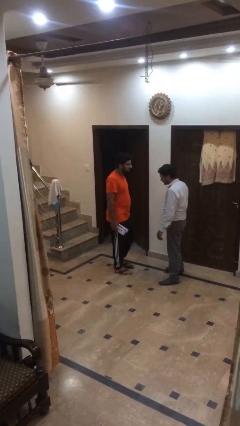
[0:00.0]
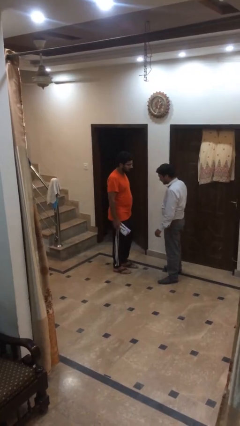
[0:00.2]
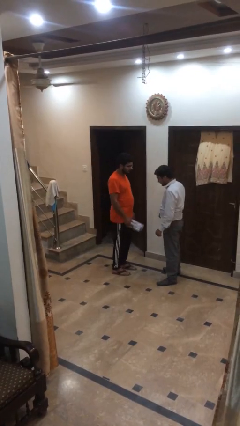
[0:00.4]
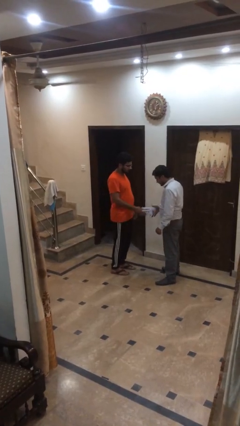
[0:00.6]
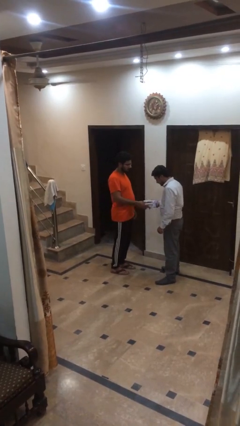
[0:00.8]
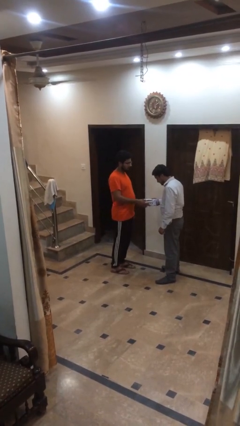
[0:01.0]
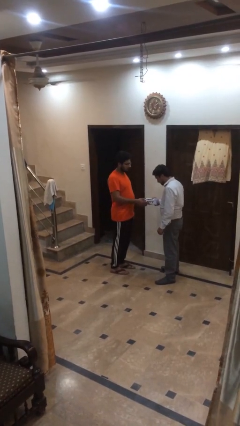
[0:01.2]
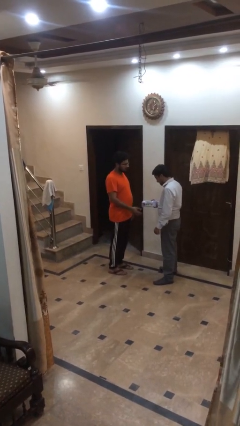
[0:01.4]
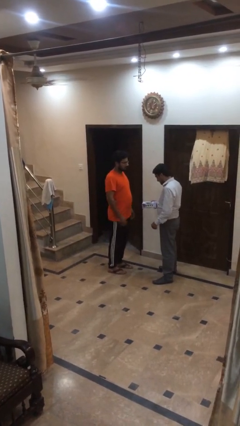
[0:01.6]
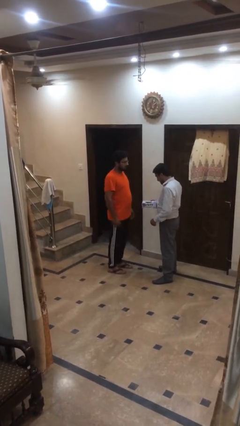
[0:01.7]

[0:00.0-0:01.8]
person transfers object to person

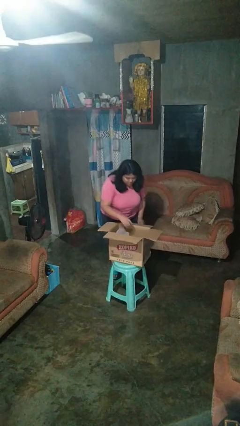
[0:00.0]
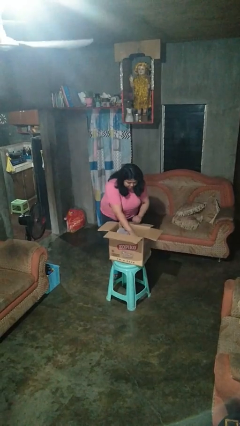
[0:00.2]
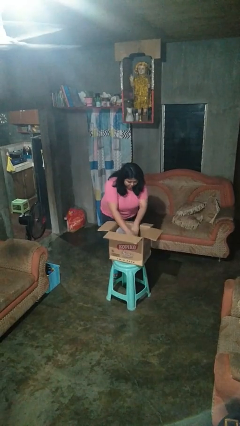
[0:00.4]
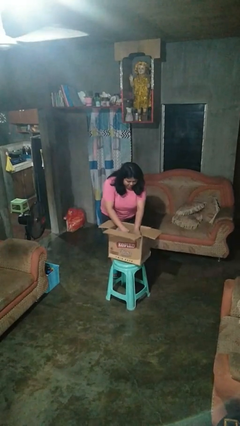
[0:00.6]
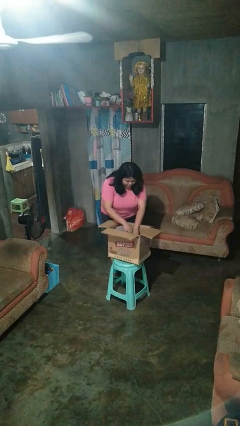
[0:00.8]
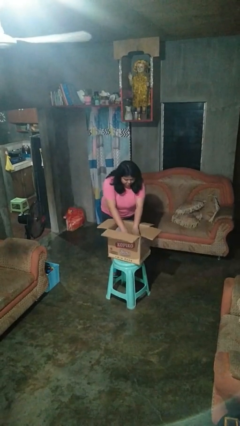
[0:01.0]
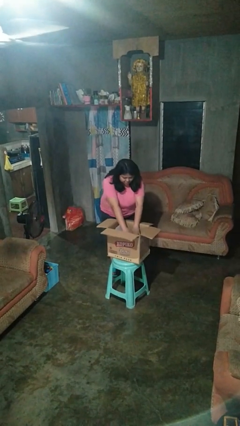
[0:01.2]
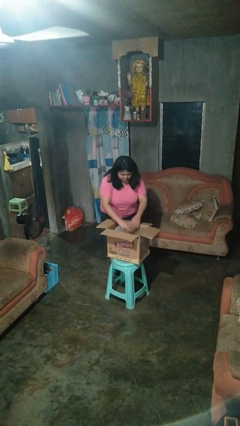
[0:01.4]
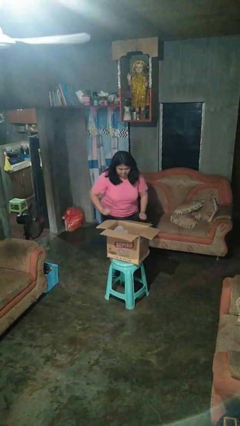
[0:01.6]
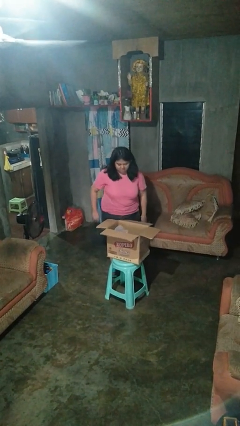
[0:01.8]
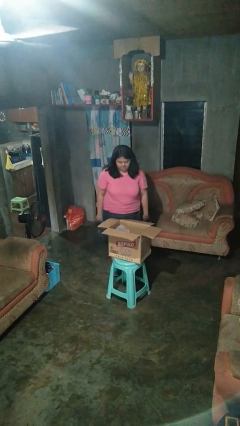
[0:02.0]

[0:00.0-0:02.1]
person searches in box

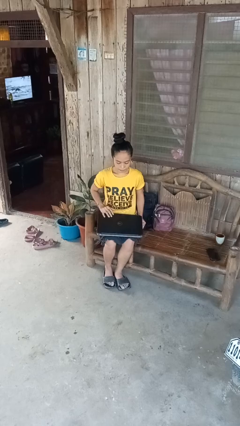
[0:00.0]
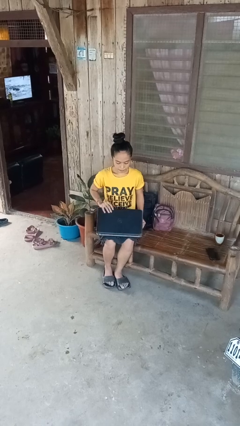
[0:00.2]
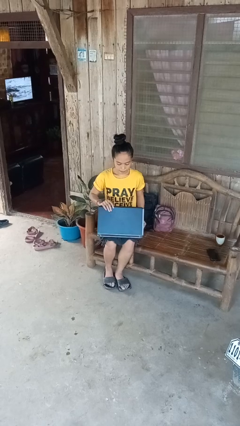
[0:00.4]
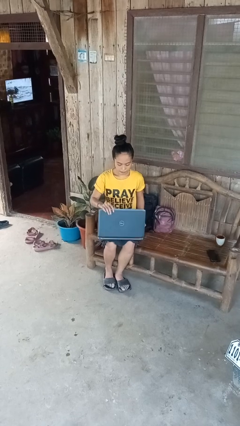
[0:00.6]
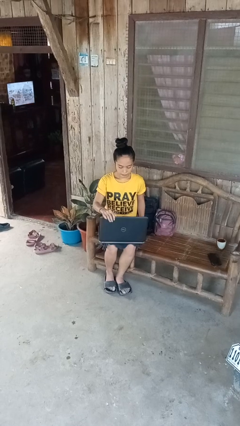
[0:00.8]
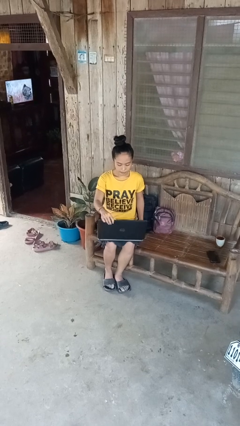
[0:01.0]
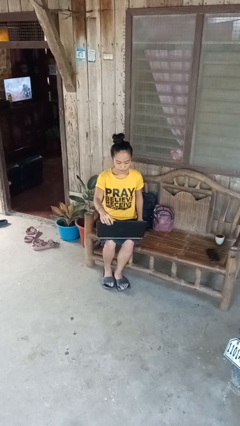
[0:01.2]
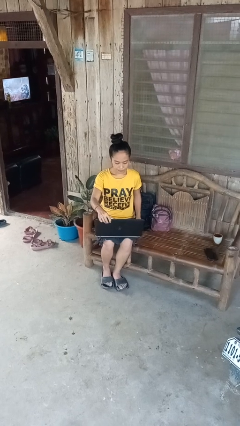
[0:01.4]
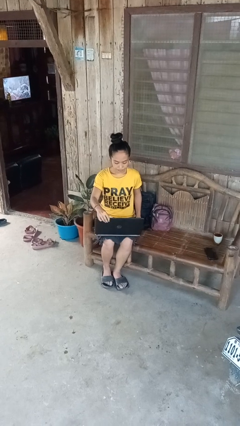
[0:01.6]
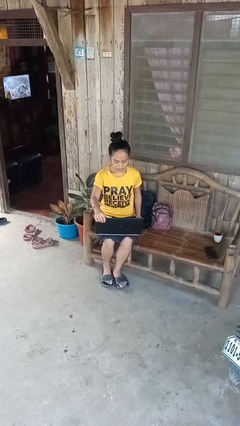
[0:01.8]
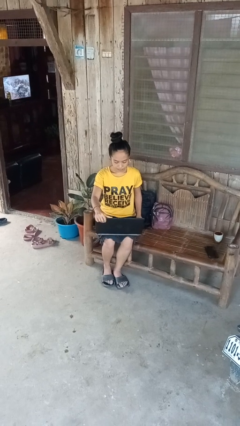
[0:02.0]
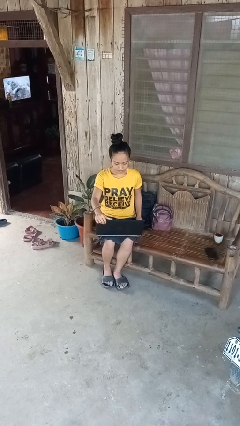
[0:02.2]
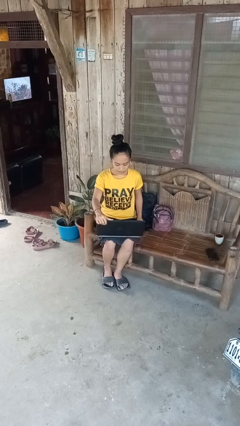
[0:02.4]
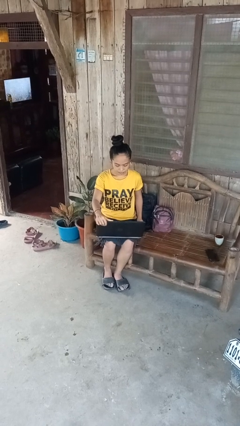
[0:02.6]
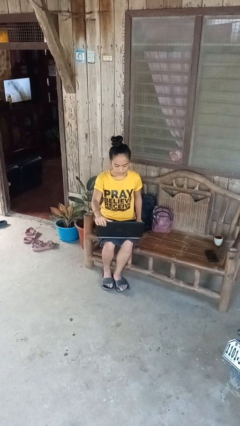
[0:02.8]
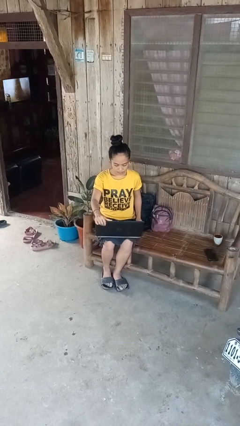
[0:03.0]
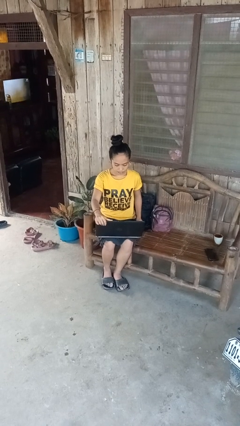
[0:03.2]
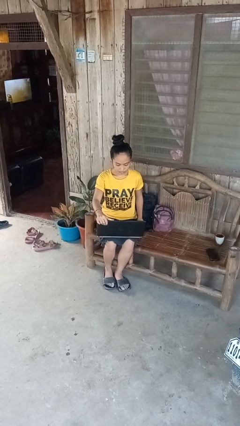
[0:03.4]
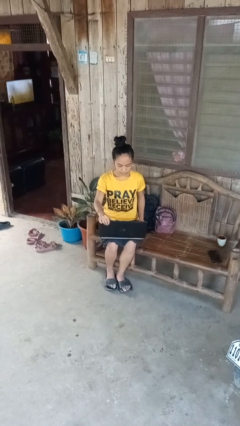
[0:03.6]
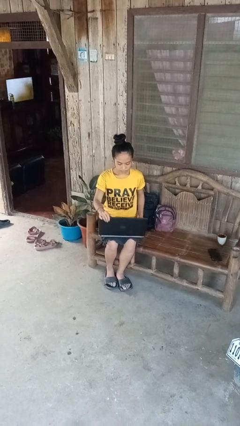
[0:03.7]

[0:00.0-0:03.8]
person opens laptop

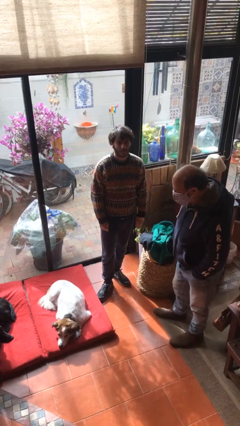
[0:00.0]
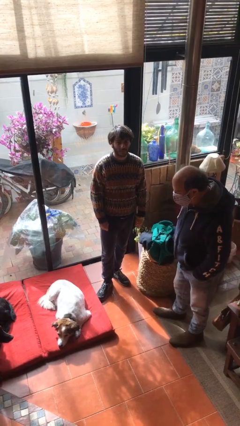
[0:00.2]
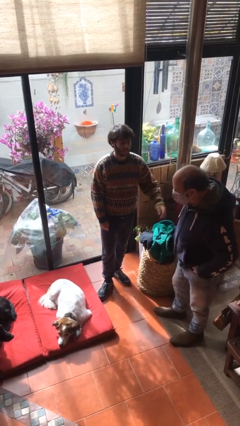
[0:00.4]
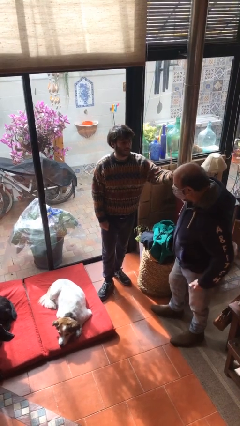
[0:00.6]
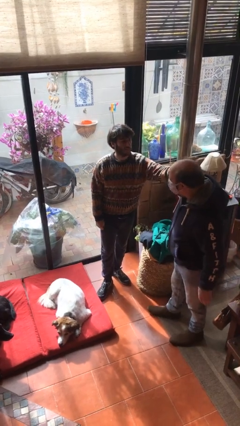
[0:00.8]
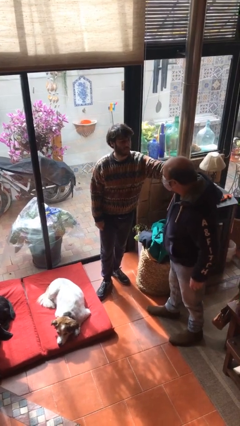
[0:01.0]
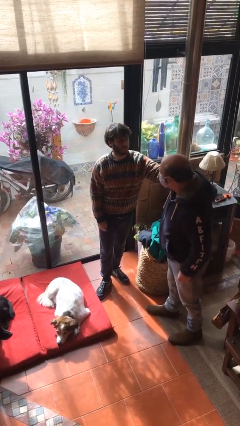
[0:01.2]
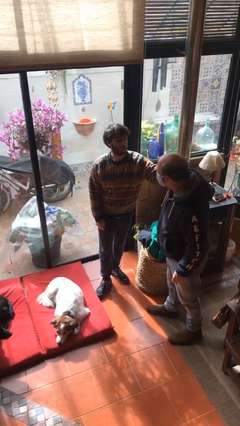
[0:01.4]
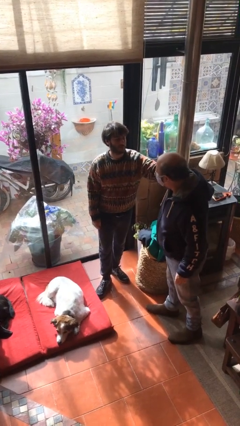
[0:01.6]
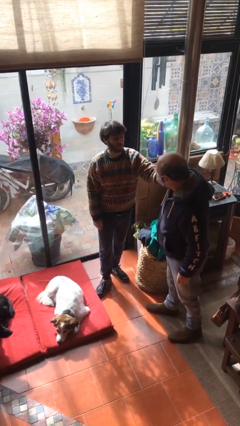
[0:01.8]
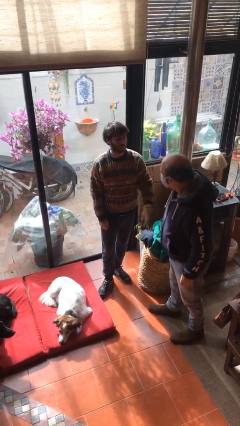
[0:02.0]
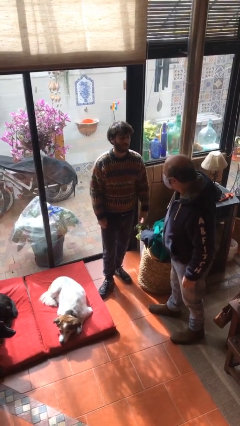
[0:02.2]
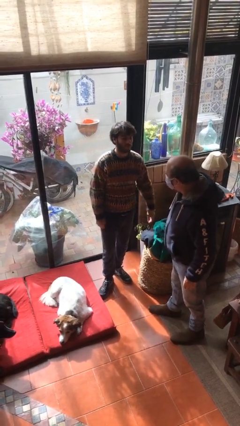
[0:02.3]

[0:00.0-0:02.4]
person pounds shoulders of person

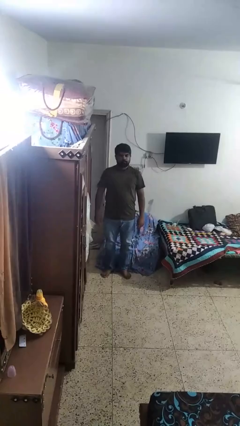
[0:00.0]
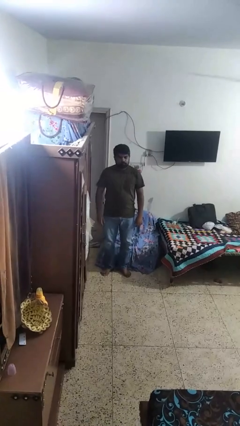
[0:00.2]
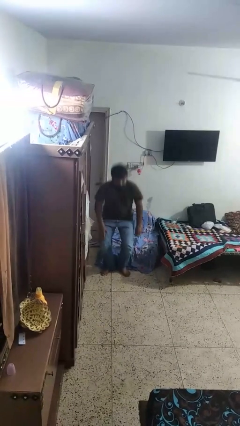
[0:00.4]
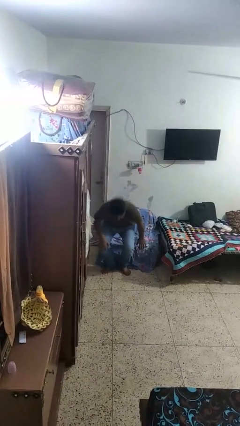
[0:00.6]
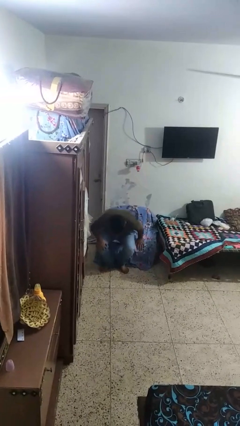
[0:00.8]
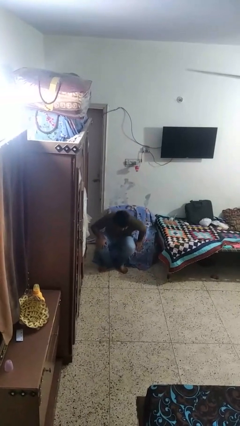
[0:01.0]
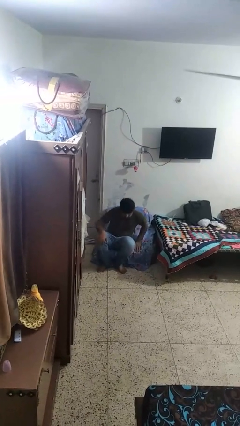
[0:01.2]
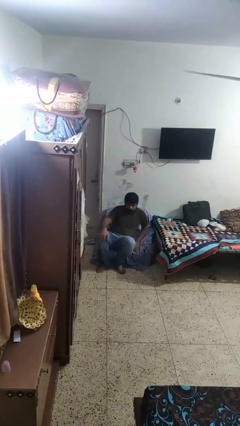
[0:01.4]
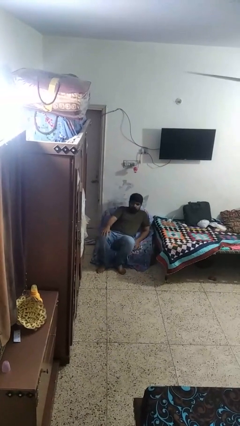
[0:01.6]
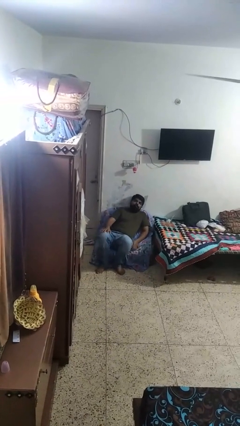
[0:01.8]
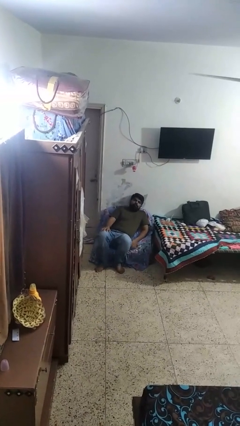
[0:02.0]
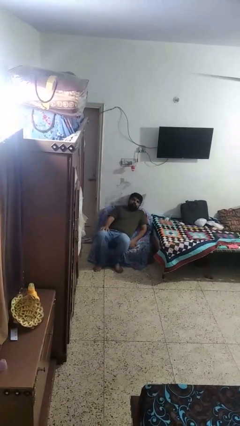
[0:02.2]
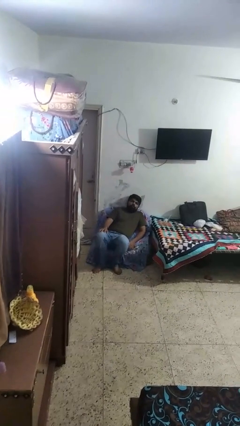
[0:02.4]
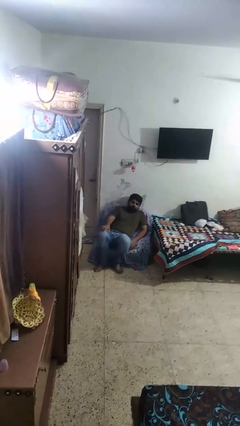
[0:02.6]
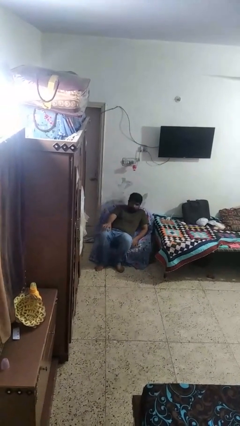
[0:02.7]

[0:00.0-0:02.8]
person lies down on couch

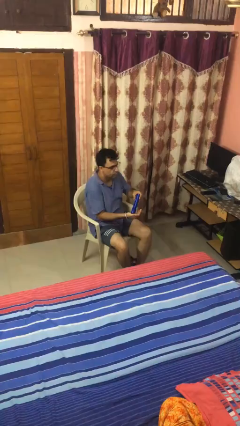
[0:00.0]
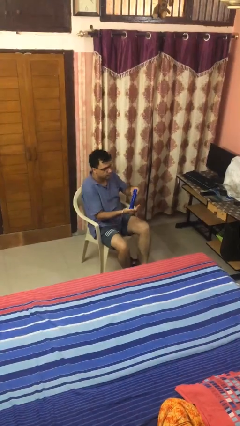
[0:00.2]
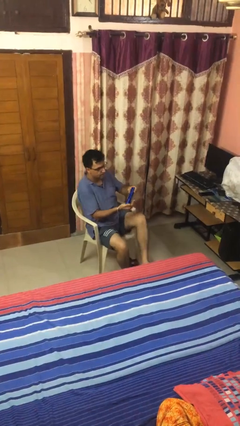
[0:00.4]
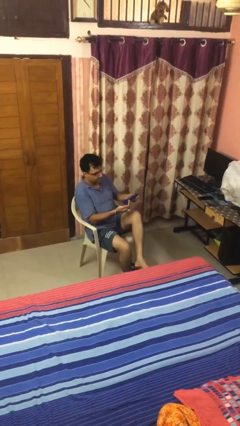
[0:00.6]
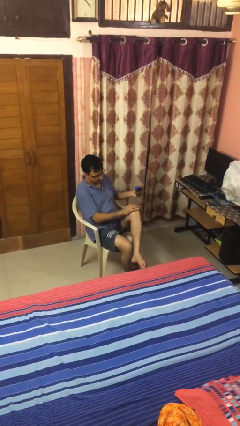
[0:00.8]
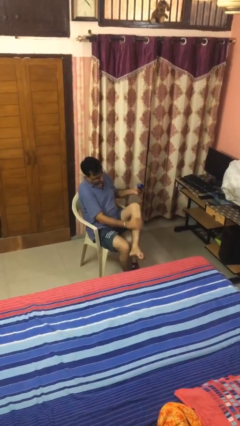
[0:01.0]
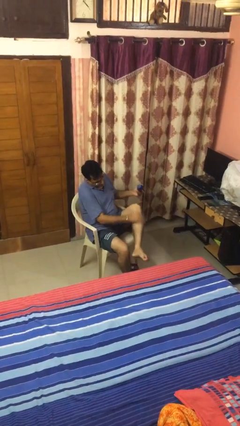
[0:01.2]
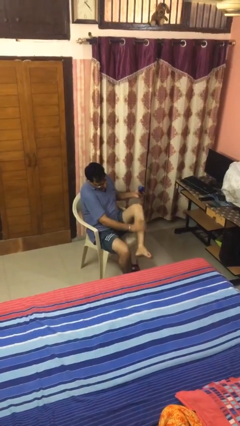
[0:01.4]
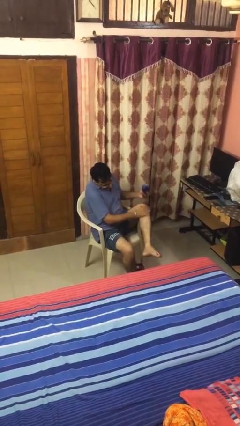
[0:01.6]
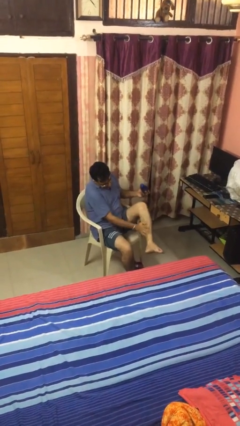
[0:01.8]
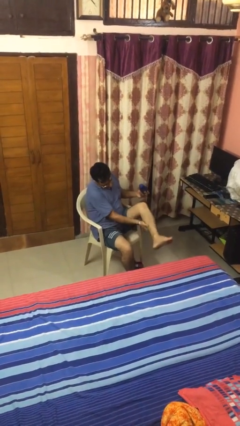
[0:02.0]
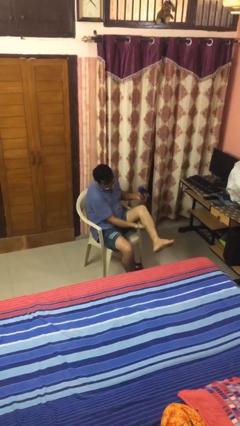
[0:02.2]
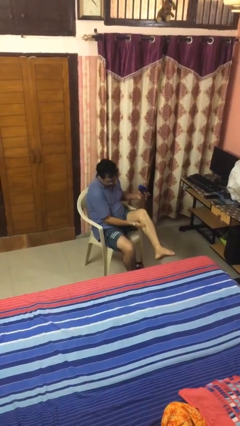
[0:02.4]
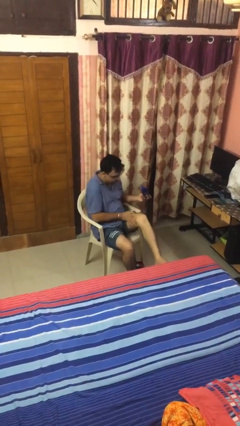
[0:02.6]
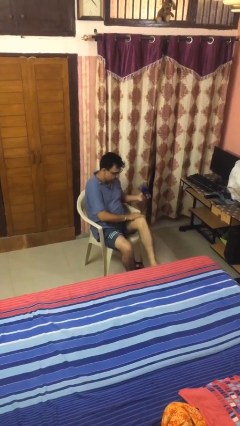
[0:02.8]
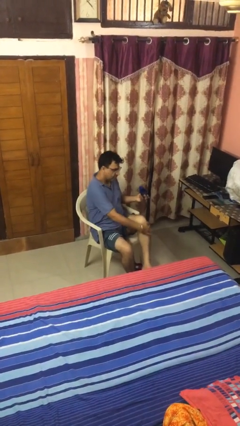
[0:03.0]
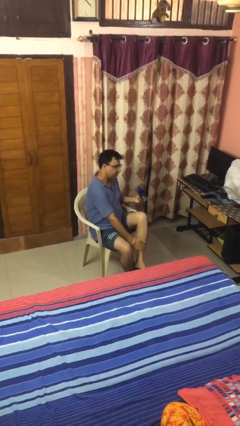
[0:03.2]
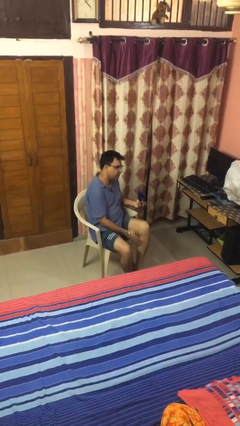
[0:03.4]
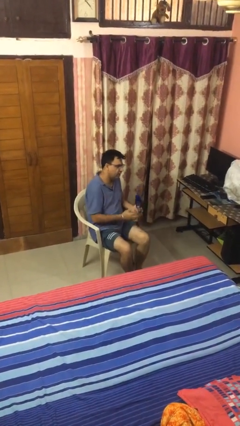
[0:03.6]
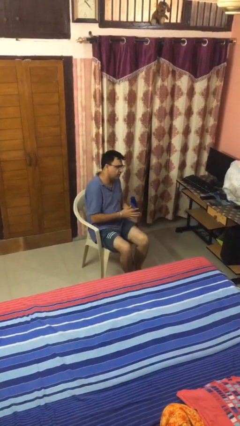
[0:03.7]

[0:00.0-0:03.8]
person applies sunscreen

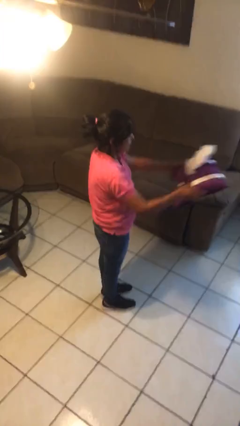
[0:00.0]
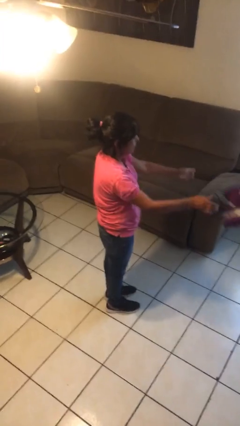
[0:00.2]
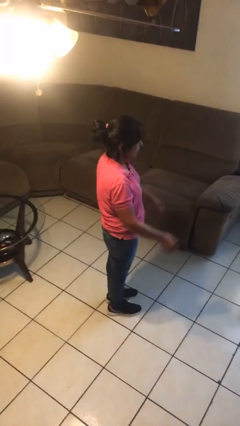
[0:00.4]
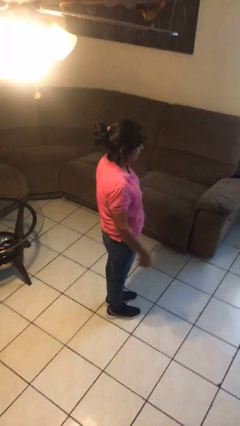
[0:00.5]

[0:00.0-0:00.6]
person throws object to ground

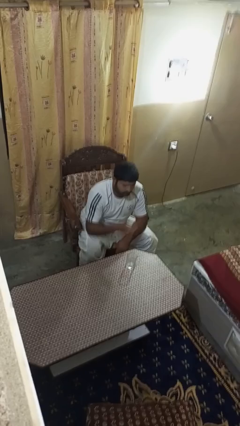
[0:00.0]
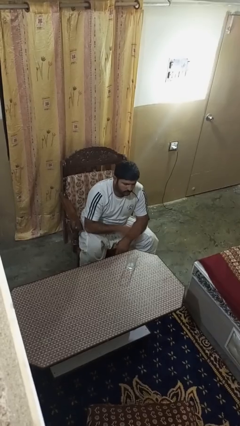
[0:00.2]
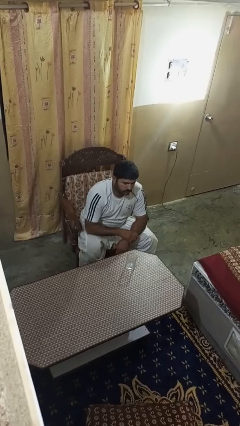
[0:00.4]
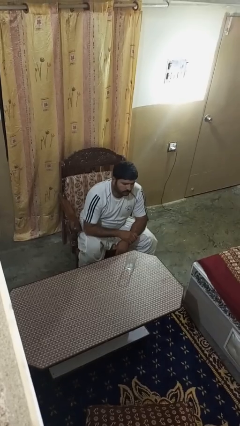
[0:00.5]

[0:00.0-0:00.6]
person drinks from shotglass
